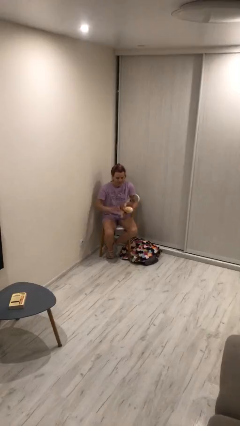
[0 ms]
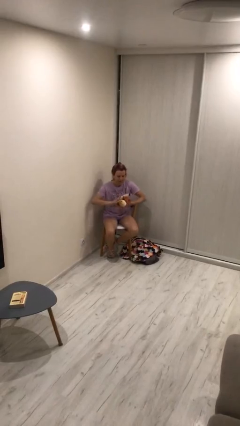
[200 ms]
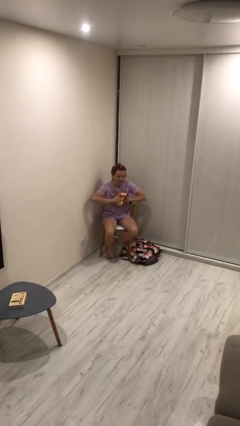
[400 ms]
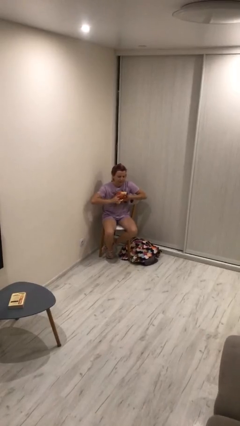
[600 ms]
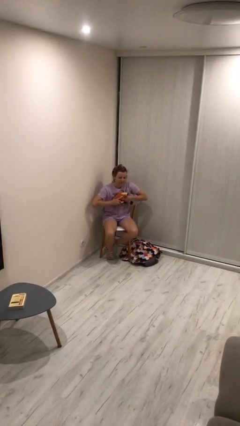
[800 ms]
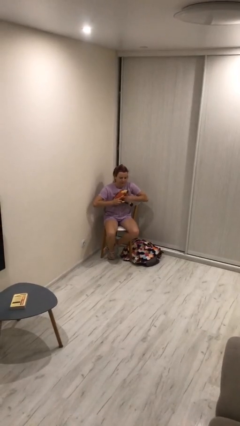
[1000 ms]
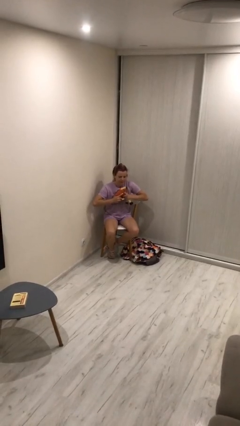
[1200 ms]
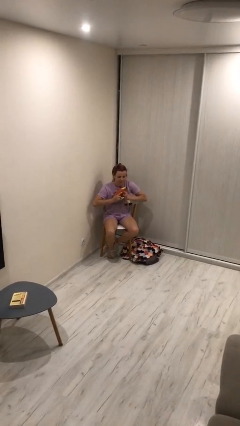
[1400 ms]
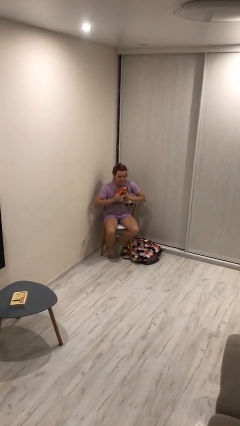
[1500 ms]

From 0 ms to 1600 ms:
person squeezes object

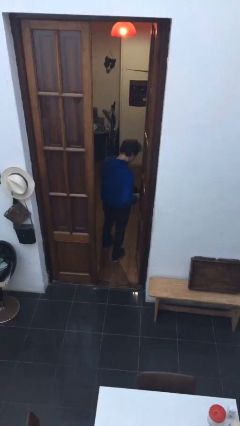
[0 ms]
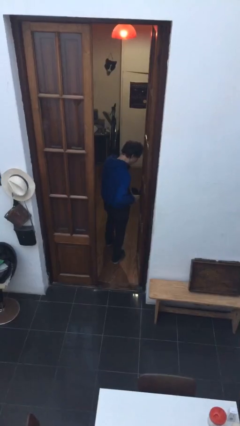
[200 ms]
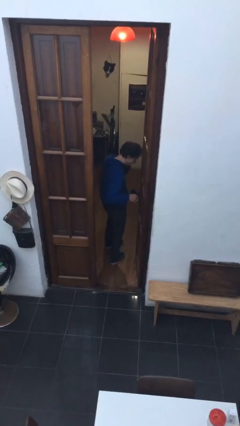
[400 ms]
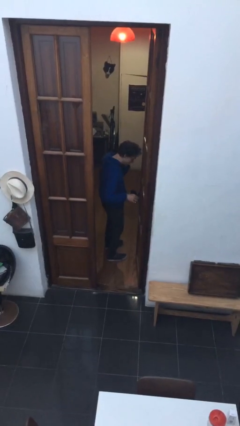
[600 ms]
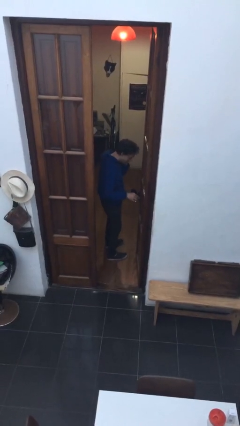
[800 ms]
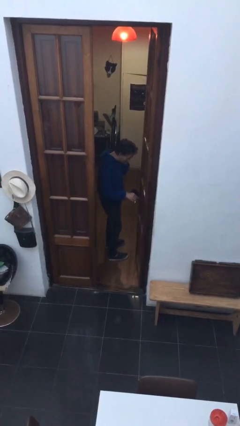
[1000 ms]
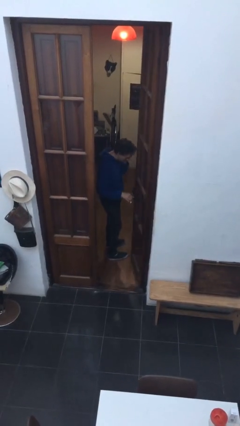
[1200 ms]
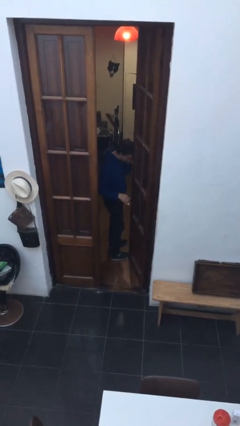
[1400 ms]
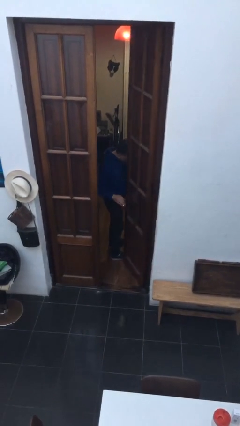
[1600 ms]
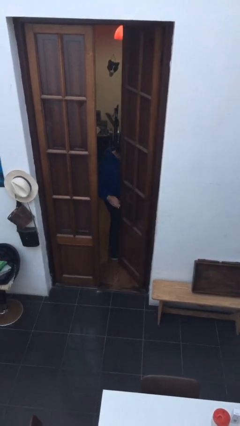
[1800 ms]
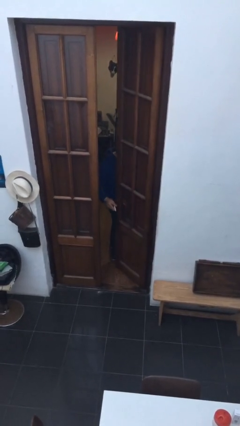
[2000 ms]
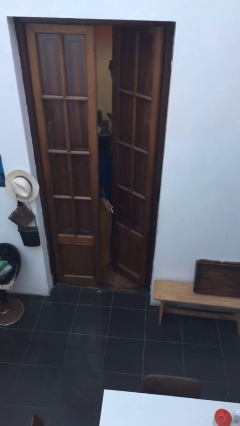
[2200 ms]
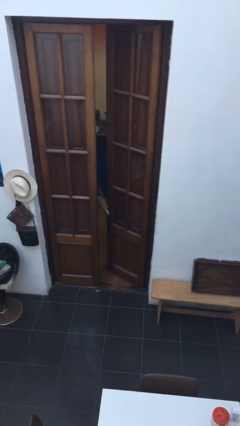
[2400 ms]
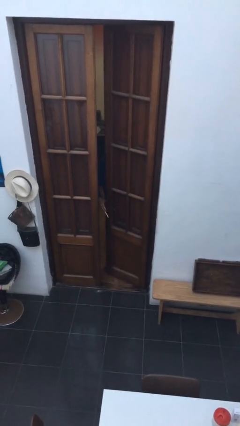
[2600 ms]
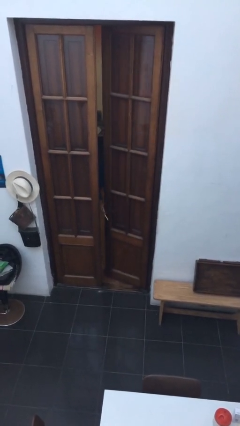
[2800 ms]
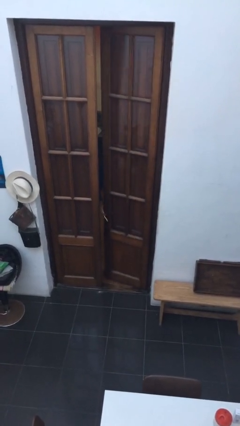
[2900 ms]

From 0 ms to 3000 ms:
person closes facility door

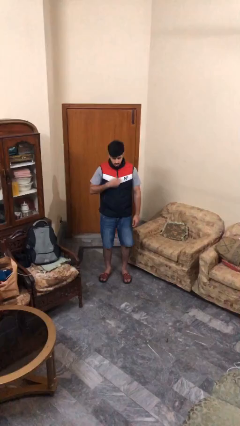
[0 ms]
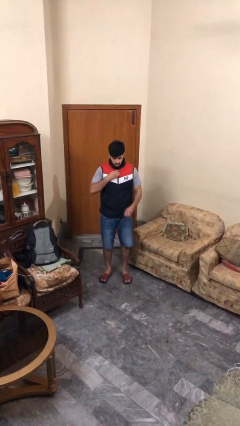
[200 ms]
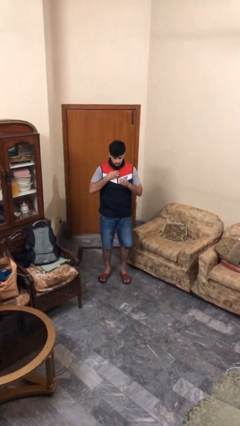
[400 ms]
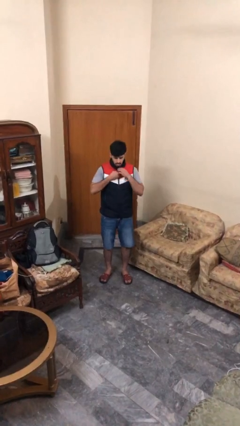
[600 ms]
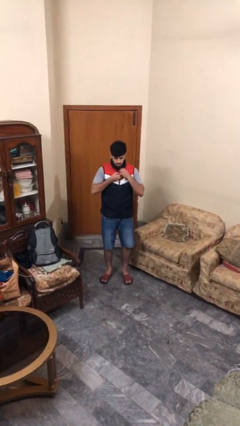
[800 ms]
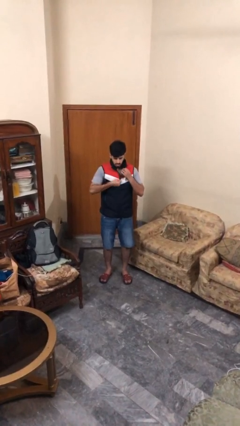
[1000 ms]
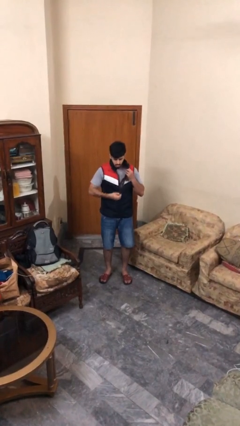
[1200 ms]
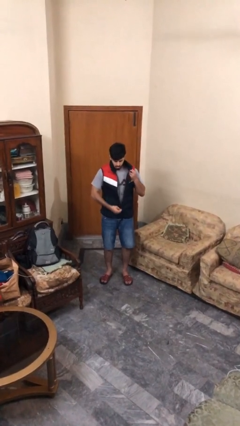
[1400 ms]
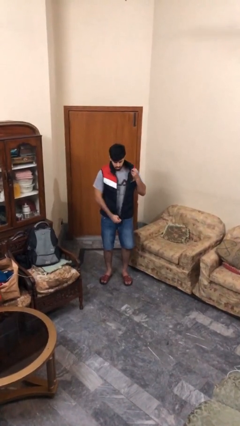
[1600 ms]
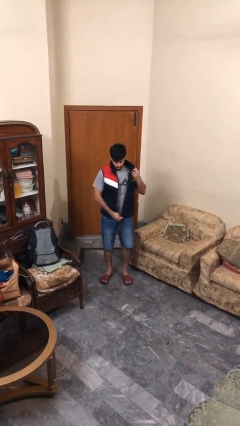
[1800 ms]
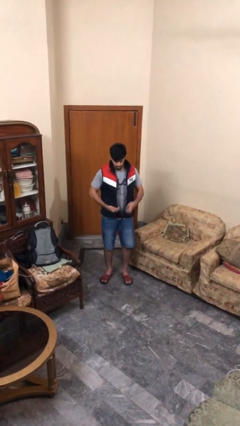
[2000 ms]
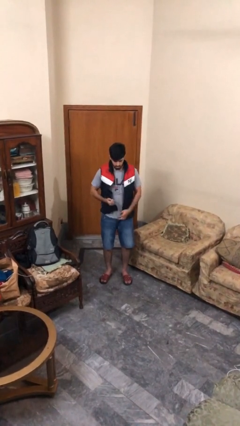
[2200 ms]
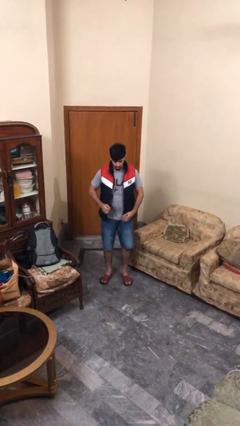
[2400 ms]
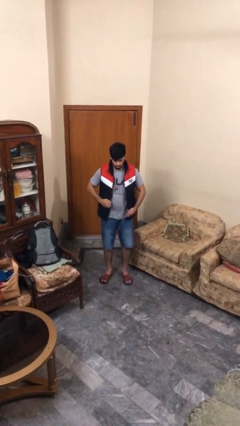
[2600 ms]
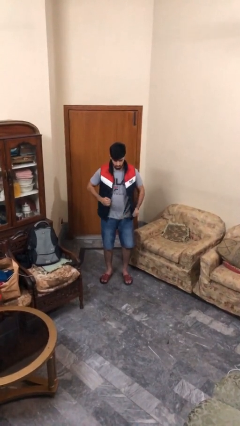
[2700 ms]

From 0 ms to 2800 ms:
person unzips jacket

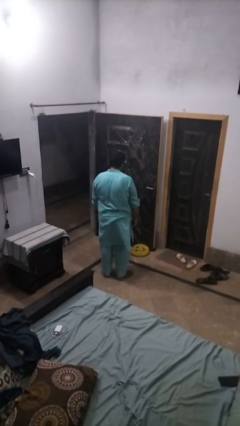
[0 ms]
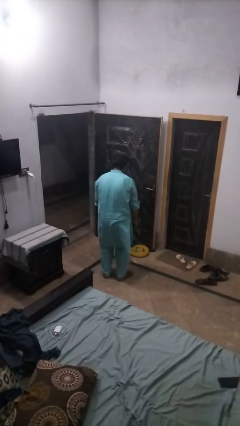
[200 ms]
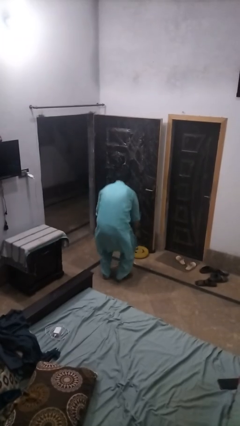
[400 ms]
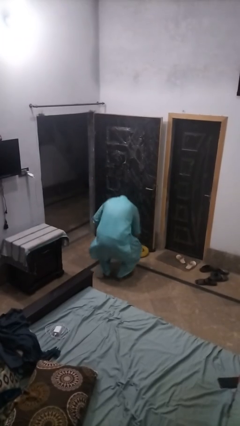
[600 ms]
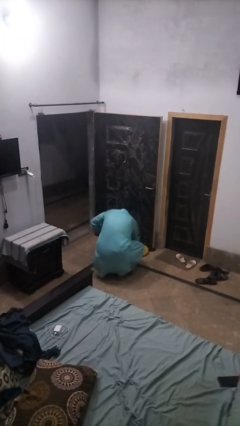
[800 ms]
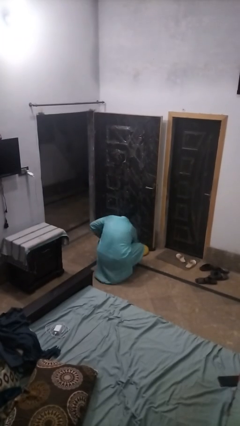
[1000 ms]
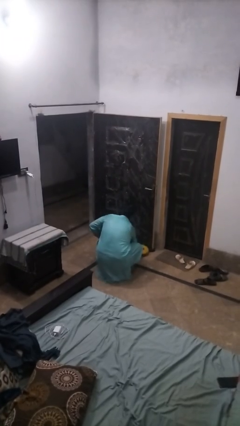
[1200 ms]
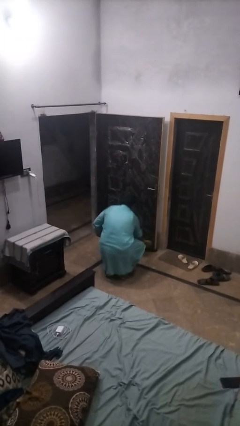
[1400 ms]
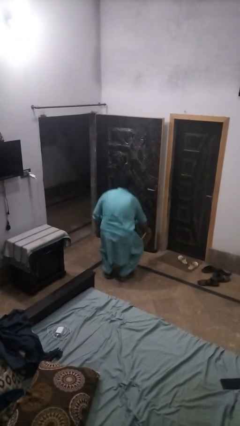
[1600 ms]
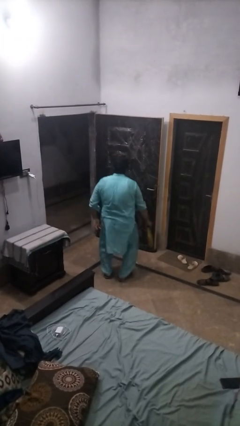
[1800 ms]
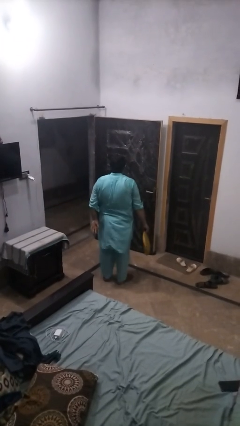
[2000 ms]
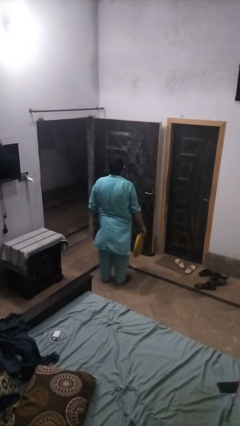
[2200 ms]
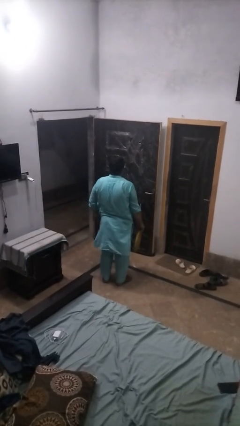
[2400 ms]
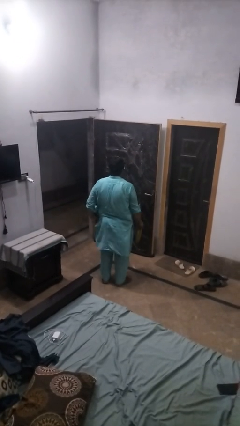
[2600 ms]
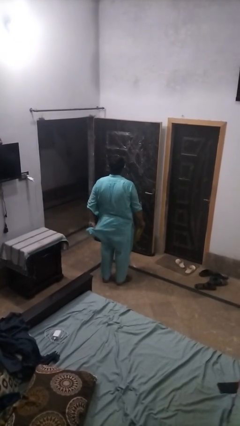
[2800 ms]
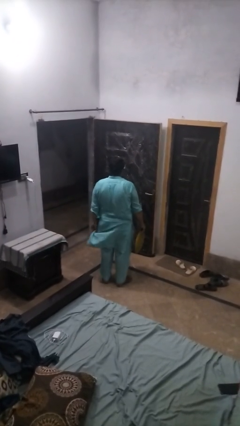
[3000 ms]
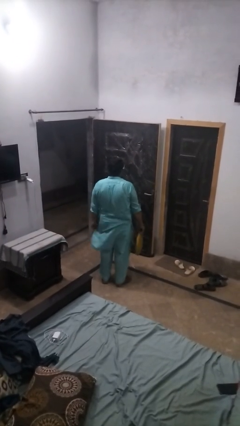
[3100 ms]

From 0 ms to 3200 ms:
person picks up object from floor

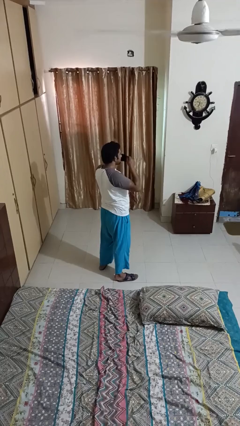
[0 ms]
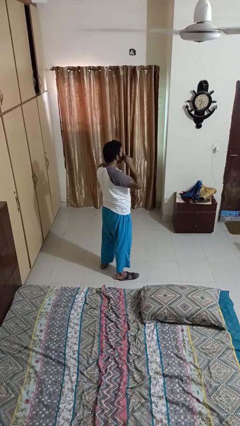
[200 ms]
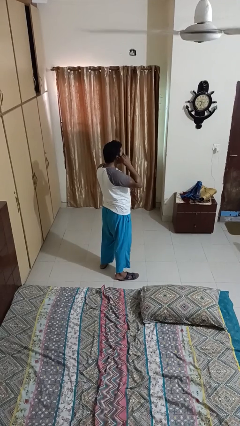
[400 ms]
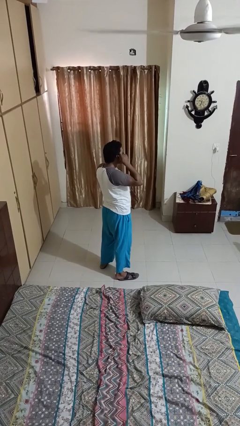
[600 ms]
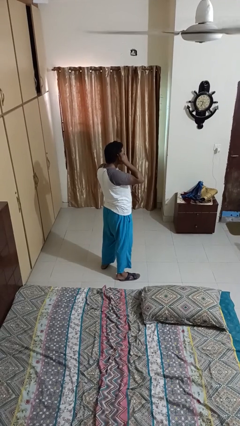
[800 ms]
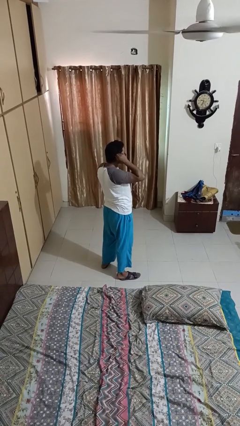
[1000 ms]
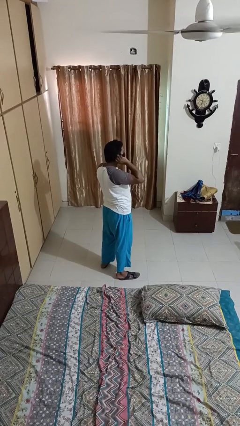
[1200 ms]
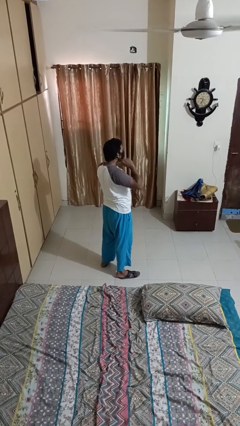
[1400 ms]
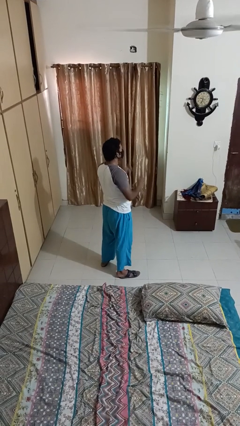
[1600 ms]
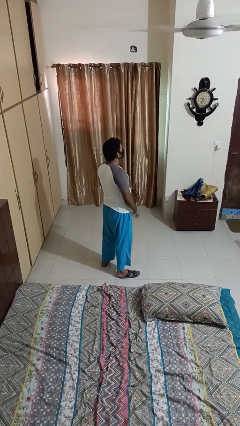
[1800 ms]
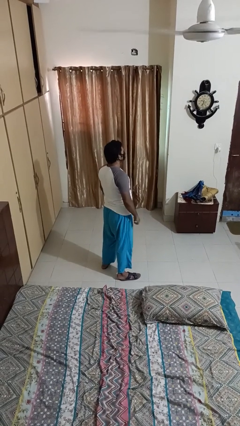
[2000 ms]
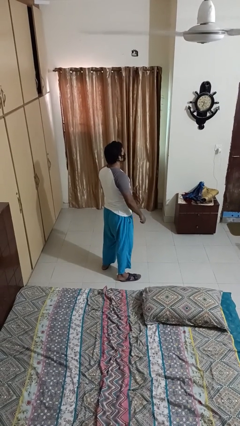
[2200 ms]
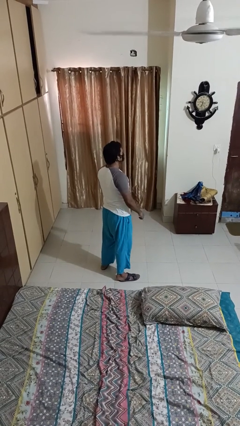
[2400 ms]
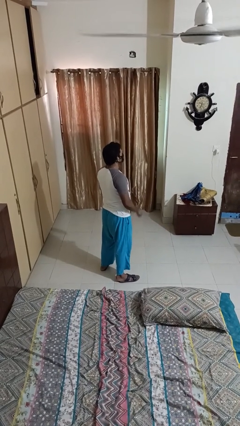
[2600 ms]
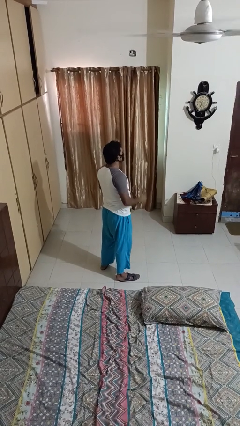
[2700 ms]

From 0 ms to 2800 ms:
person puts on facemask

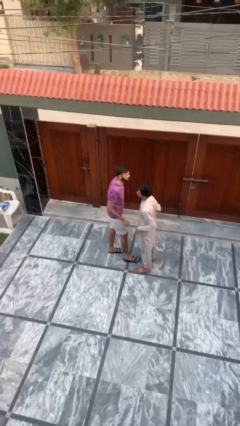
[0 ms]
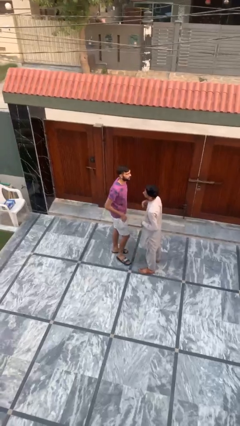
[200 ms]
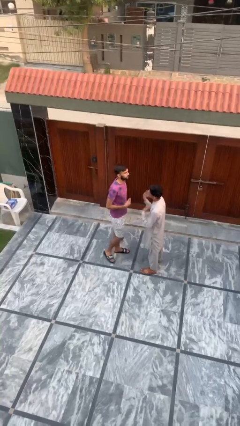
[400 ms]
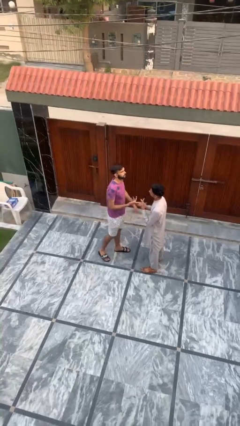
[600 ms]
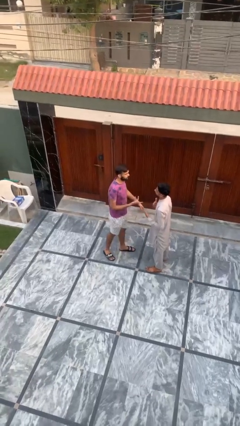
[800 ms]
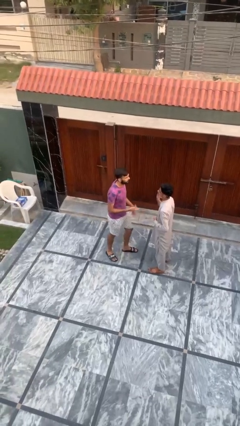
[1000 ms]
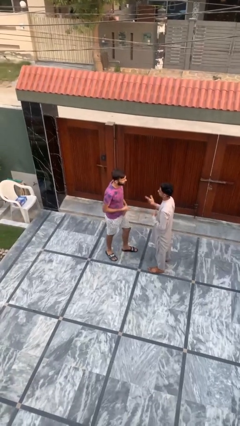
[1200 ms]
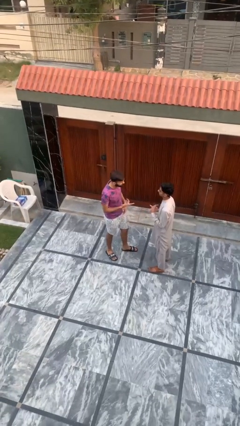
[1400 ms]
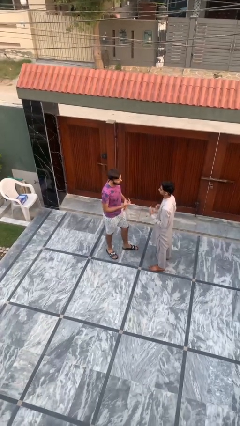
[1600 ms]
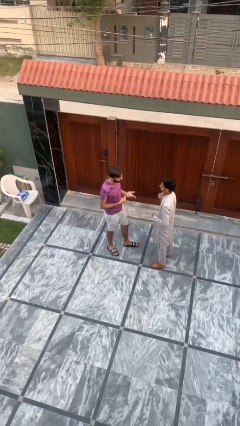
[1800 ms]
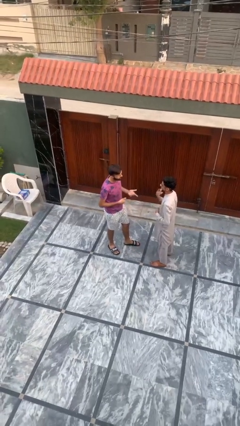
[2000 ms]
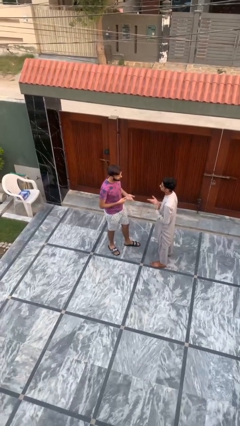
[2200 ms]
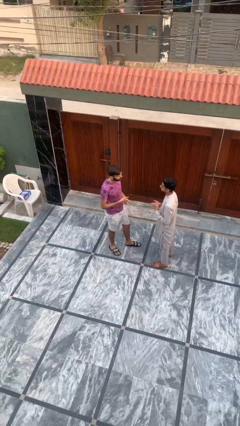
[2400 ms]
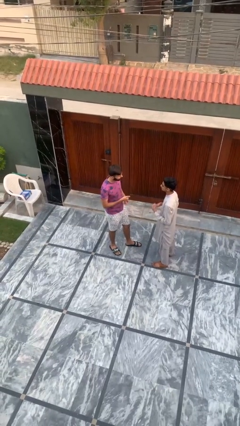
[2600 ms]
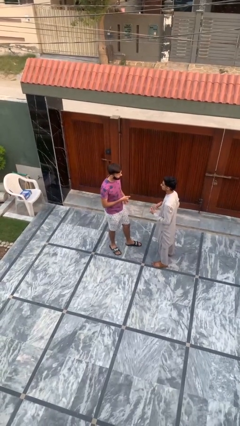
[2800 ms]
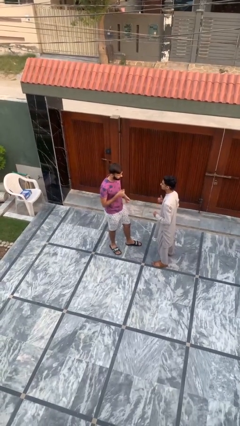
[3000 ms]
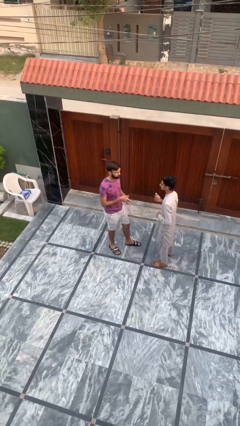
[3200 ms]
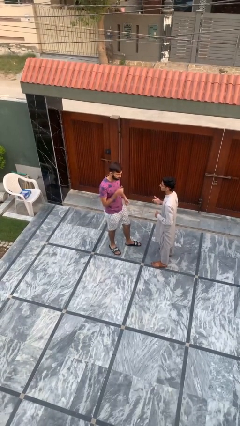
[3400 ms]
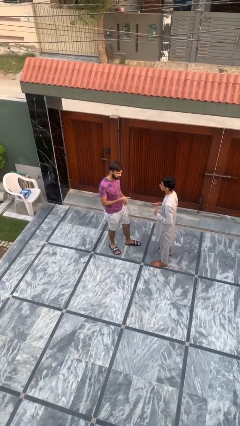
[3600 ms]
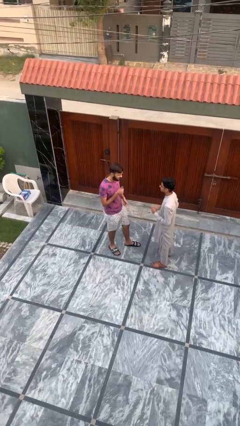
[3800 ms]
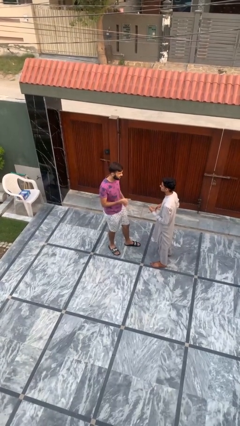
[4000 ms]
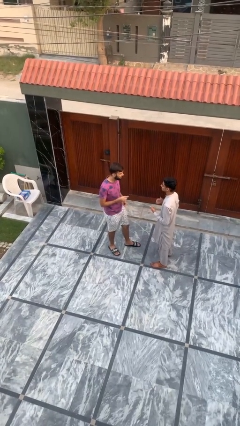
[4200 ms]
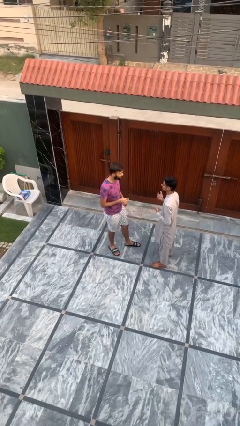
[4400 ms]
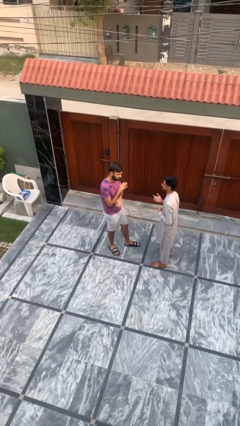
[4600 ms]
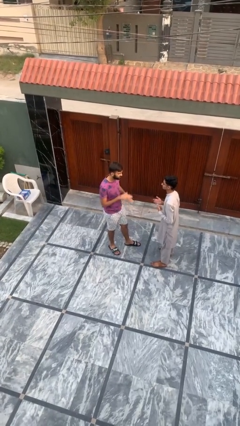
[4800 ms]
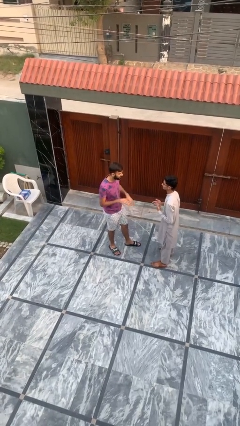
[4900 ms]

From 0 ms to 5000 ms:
person talks to person
